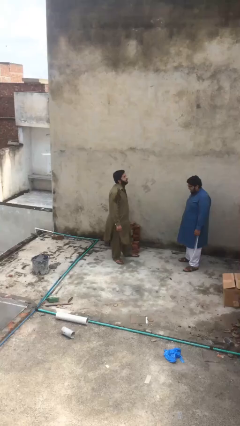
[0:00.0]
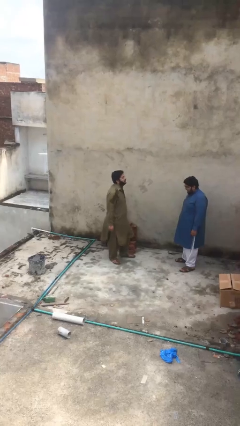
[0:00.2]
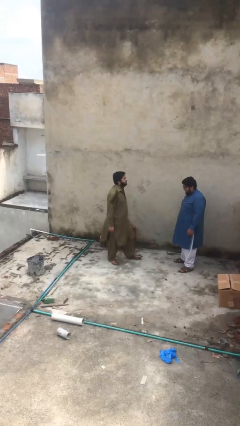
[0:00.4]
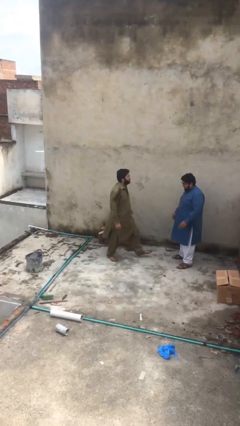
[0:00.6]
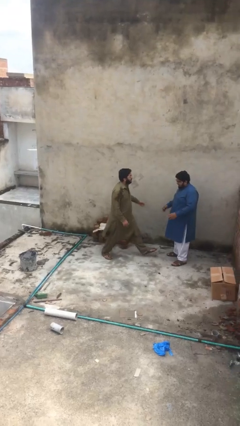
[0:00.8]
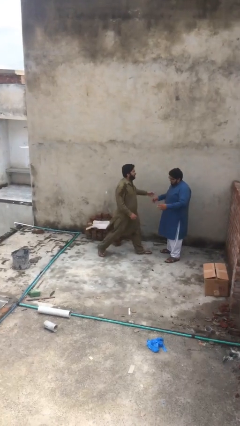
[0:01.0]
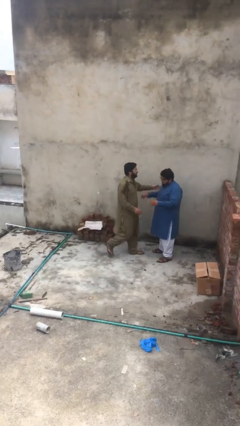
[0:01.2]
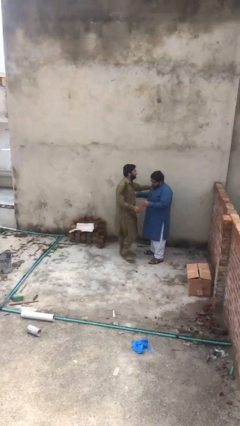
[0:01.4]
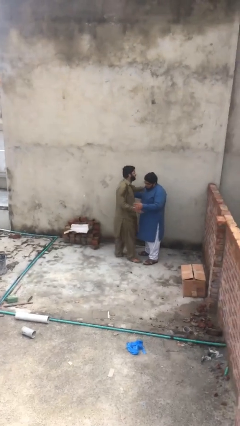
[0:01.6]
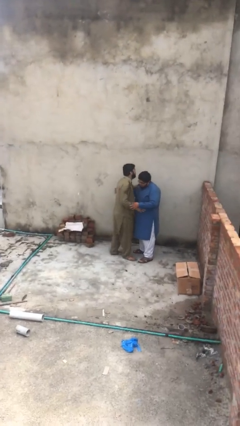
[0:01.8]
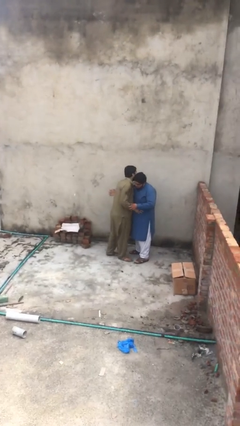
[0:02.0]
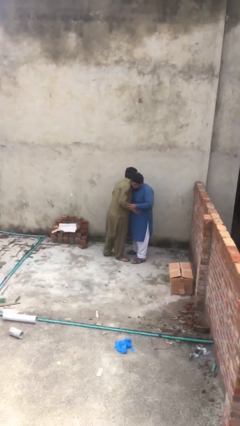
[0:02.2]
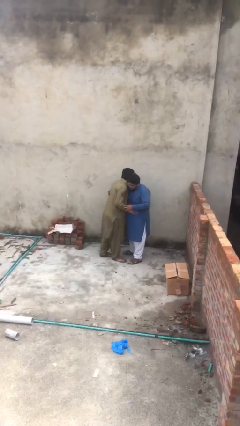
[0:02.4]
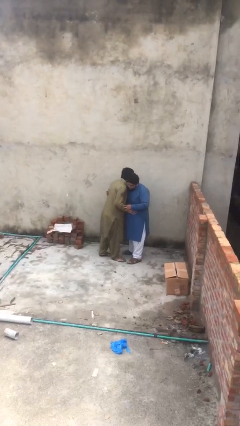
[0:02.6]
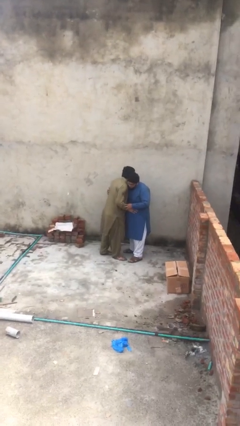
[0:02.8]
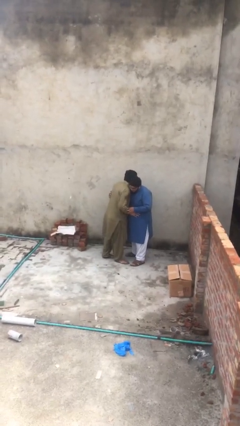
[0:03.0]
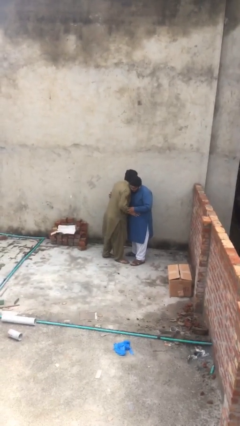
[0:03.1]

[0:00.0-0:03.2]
person embraces person

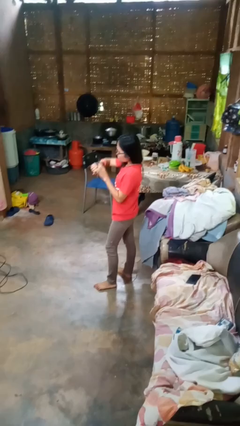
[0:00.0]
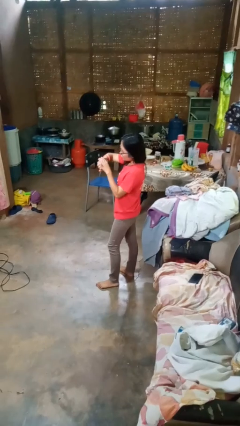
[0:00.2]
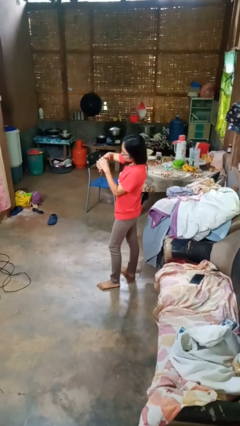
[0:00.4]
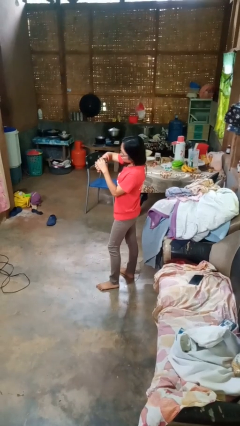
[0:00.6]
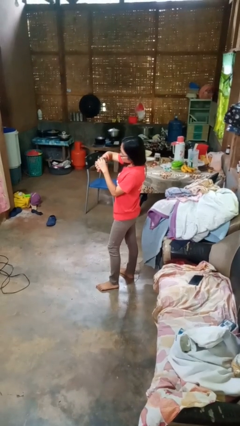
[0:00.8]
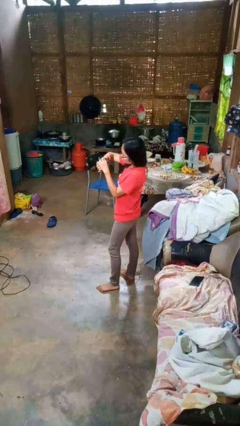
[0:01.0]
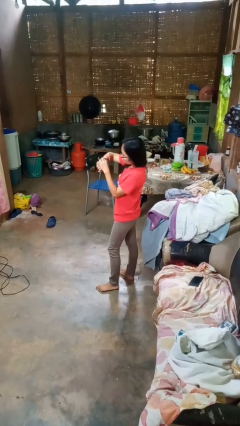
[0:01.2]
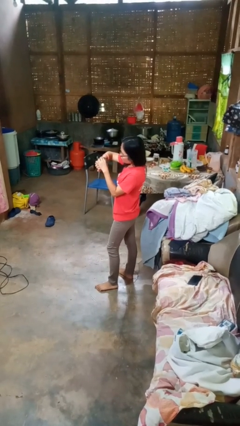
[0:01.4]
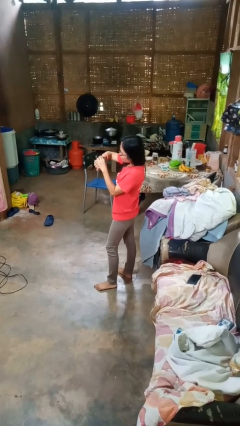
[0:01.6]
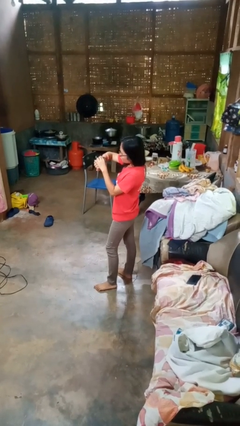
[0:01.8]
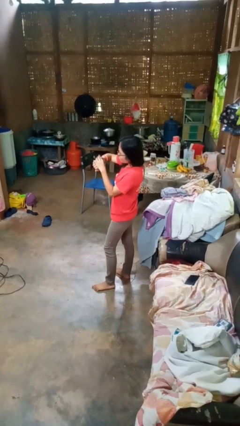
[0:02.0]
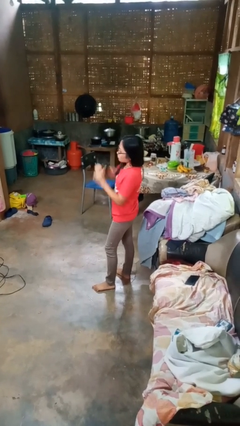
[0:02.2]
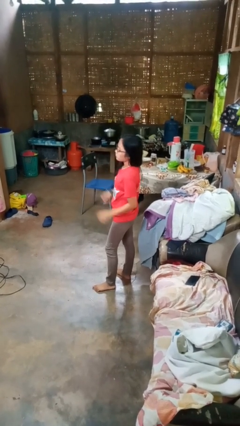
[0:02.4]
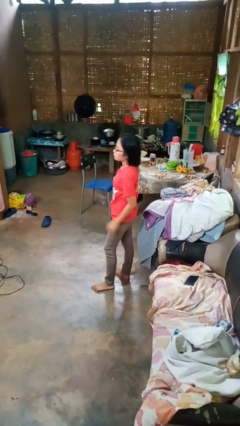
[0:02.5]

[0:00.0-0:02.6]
person looks at wristwatch

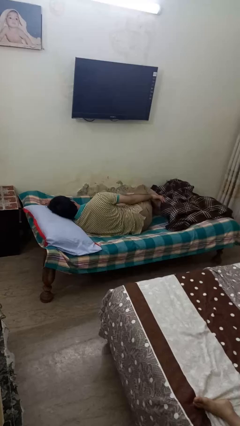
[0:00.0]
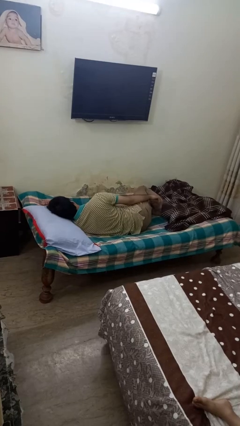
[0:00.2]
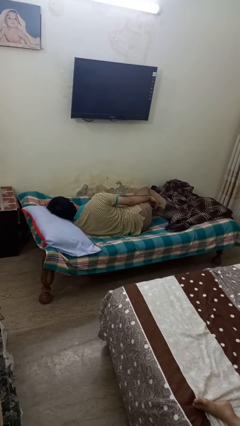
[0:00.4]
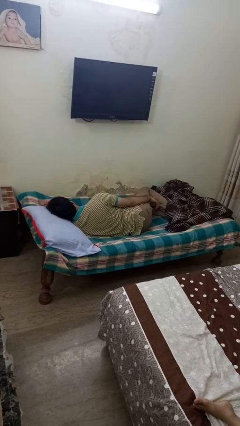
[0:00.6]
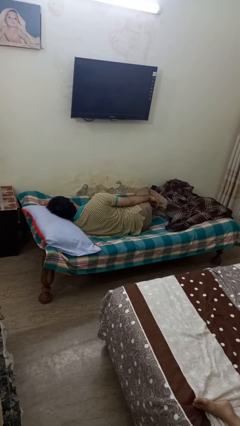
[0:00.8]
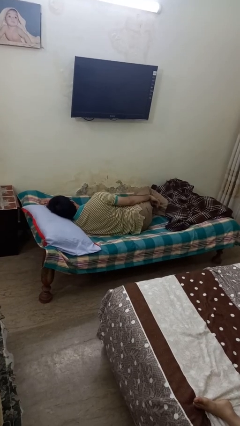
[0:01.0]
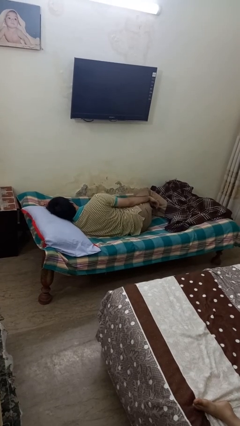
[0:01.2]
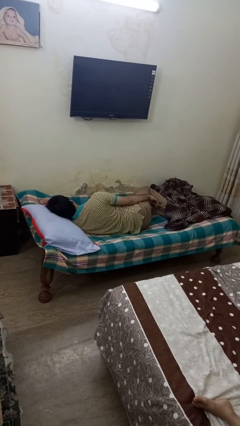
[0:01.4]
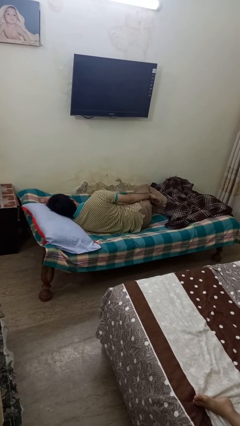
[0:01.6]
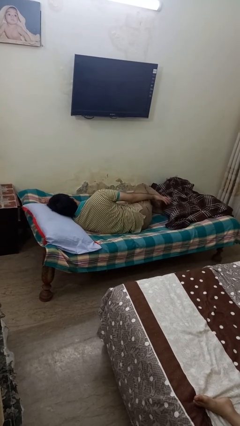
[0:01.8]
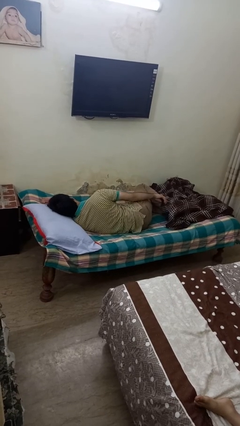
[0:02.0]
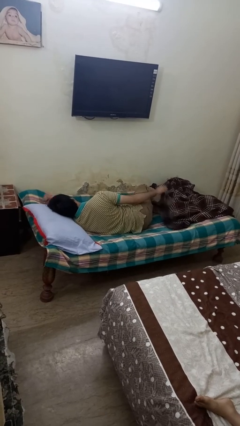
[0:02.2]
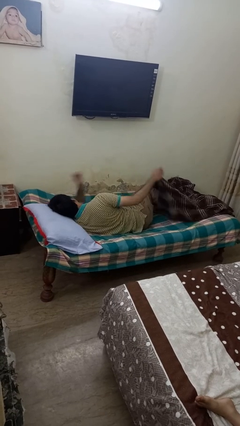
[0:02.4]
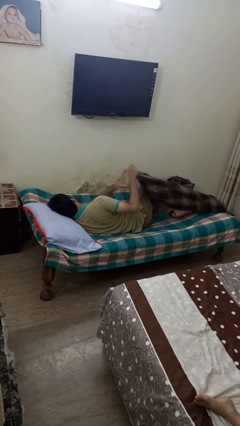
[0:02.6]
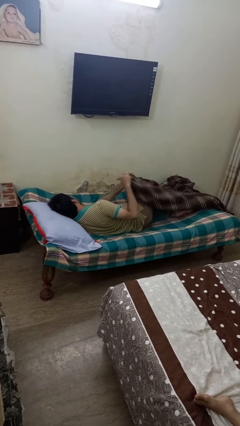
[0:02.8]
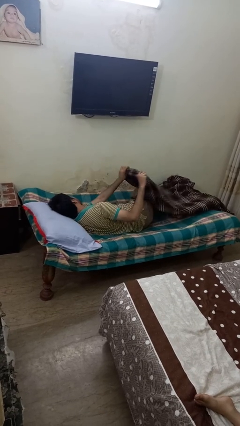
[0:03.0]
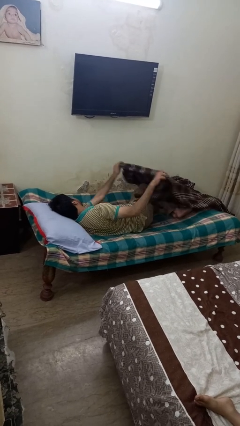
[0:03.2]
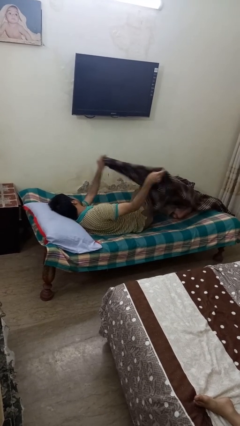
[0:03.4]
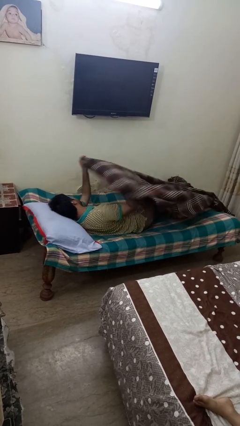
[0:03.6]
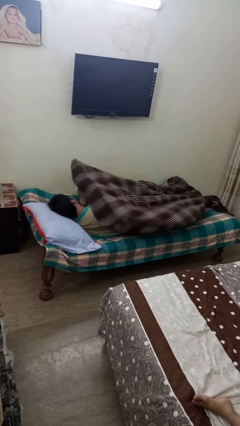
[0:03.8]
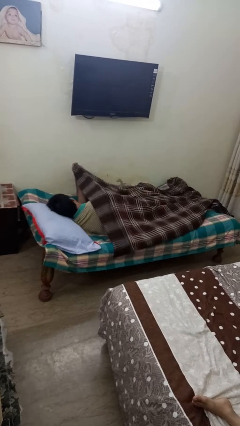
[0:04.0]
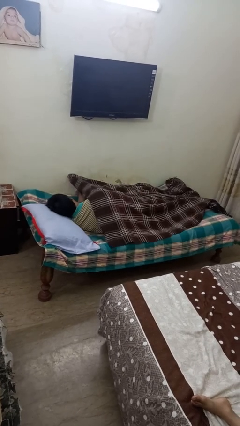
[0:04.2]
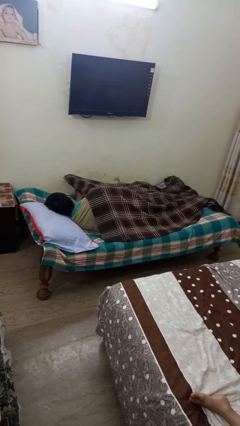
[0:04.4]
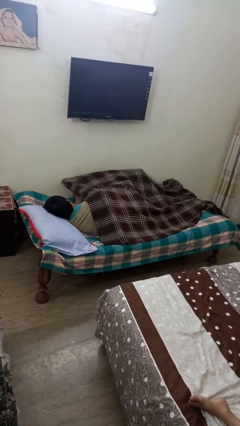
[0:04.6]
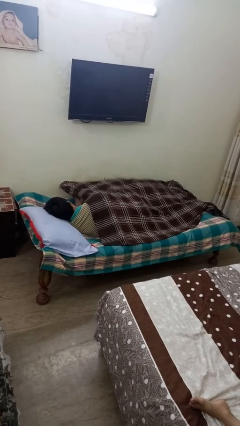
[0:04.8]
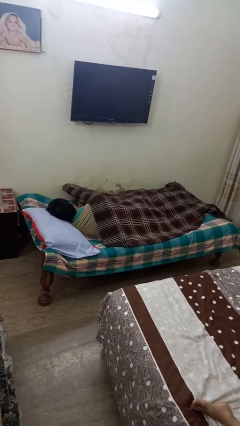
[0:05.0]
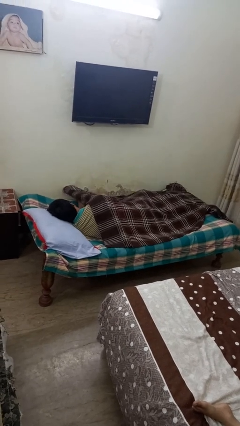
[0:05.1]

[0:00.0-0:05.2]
person covers with blanket

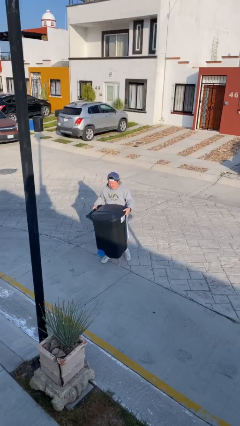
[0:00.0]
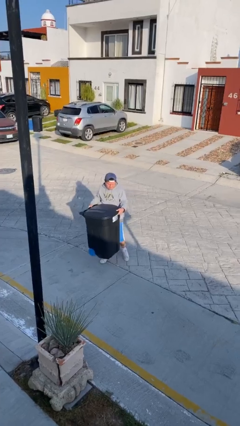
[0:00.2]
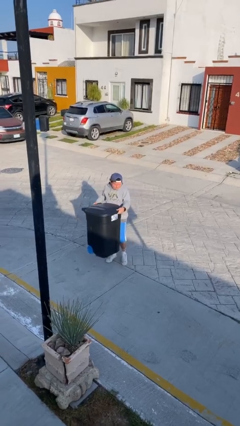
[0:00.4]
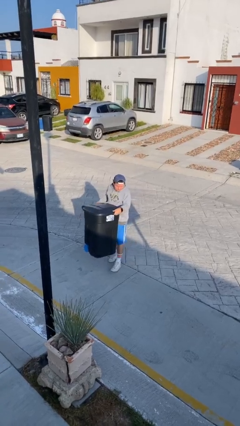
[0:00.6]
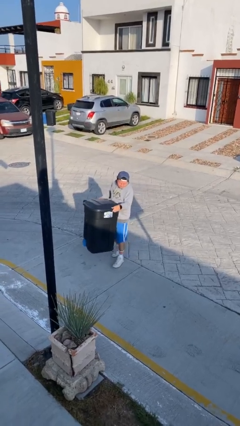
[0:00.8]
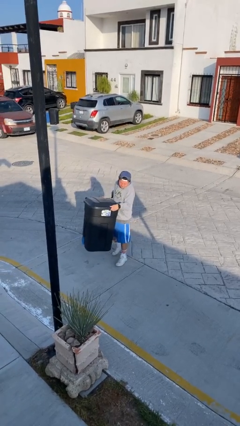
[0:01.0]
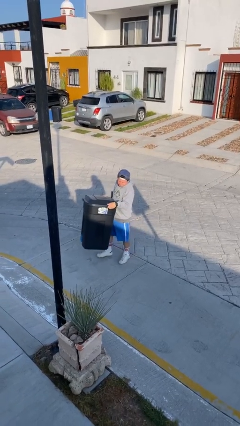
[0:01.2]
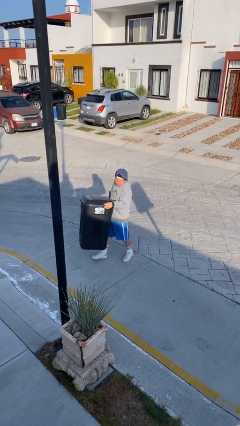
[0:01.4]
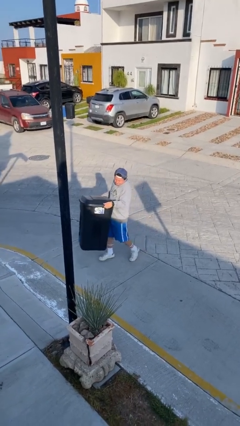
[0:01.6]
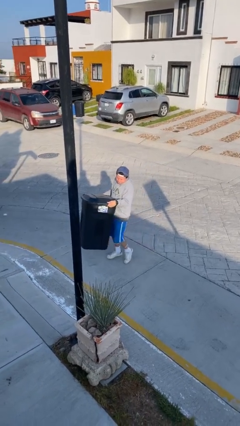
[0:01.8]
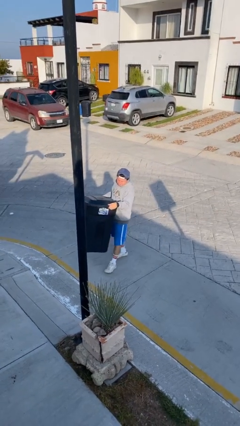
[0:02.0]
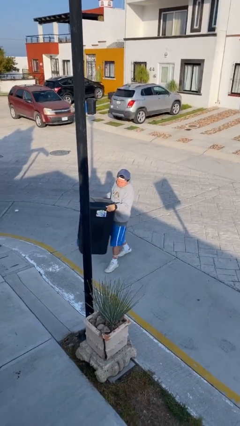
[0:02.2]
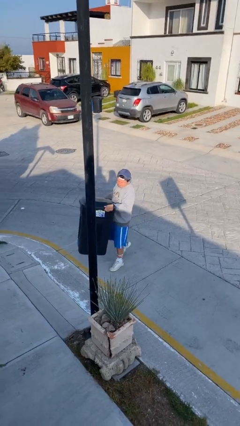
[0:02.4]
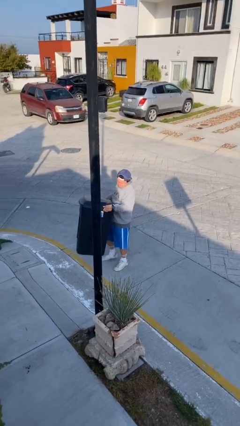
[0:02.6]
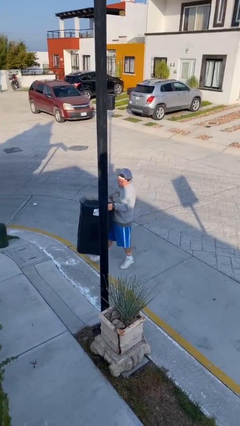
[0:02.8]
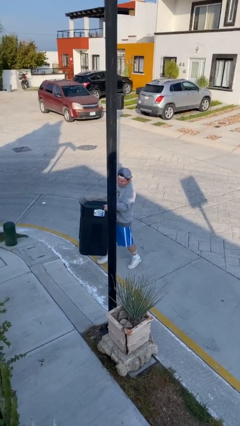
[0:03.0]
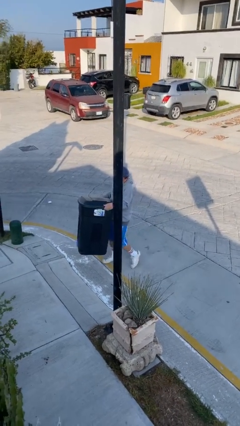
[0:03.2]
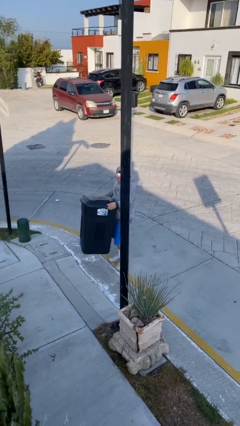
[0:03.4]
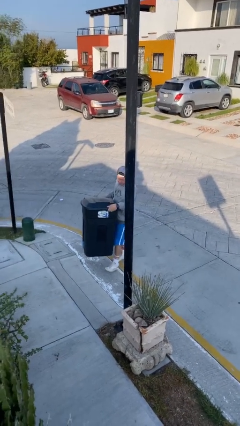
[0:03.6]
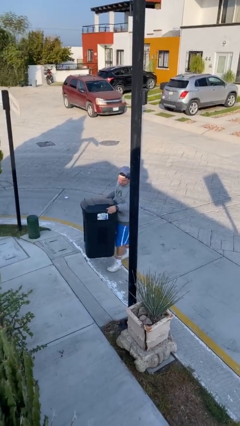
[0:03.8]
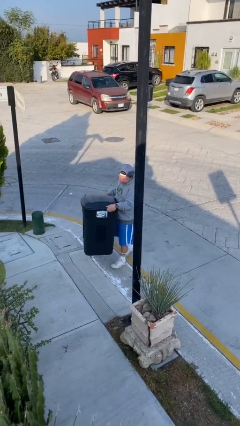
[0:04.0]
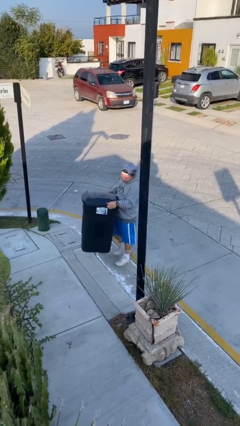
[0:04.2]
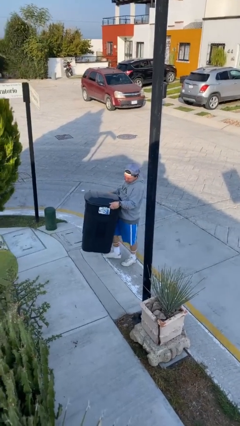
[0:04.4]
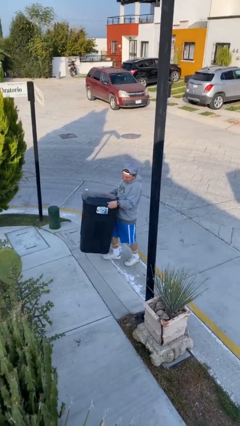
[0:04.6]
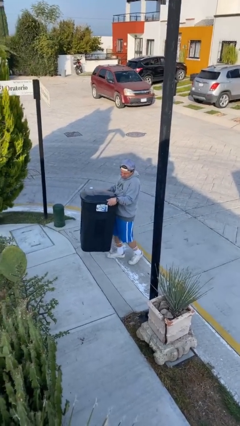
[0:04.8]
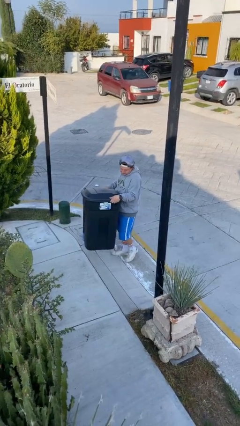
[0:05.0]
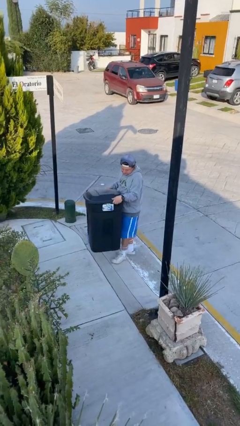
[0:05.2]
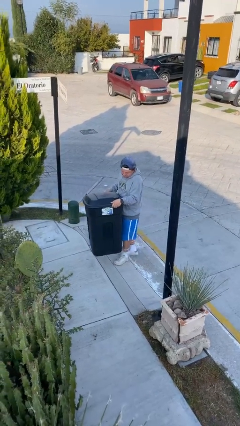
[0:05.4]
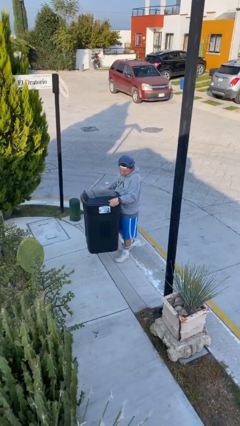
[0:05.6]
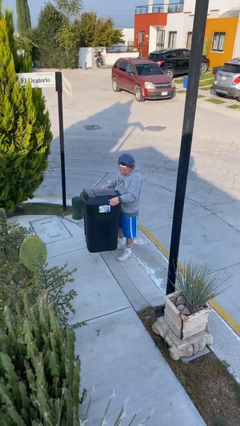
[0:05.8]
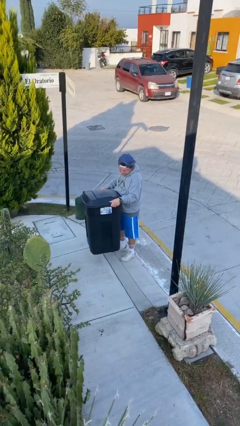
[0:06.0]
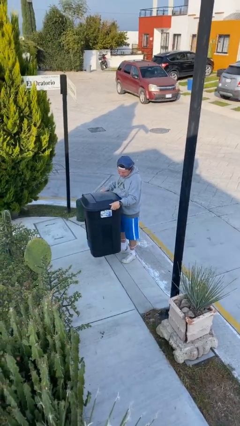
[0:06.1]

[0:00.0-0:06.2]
person carries heavy object

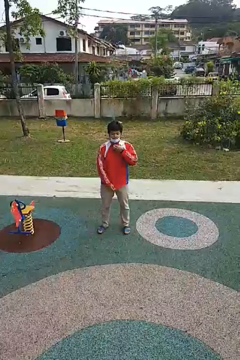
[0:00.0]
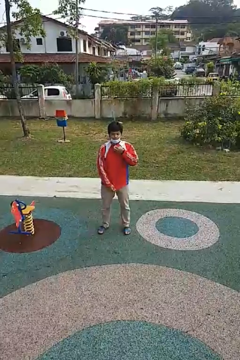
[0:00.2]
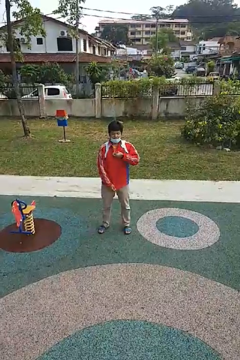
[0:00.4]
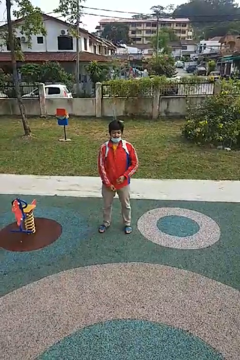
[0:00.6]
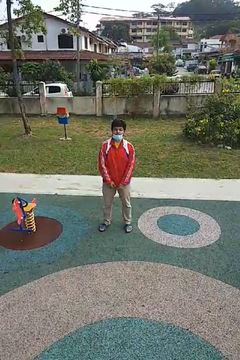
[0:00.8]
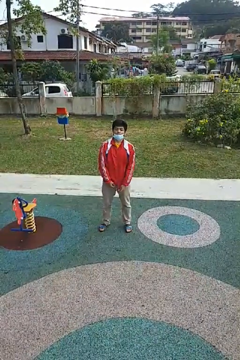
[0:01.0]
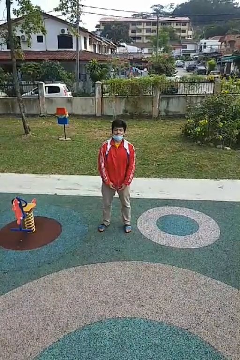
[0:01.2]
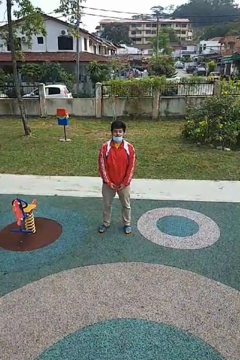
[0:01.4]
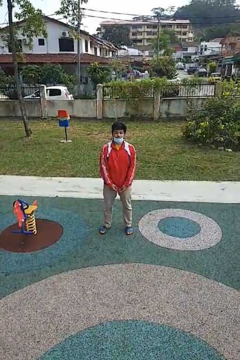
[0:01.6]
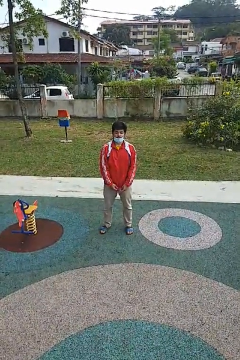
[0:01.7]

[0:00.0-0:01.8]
person unzips jacket
